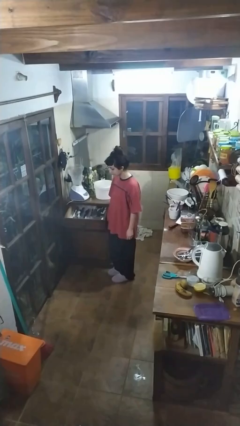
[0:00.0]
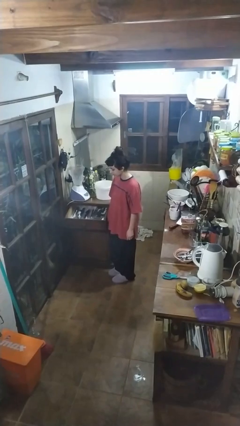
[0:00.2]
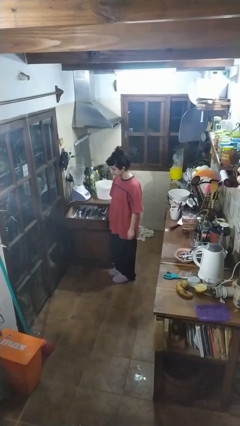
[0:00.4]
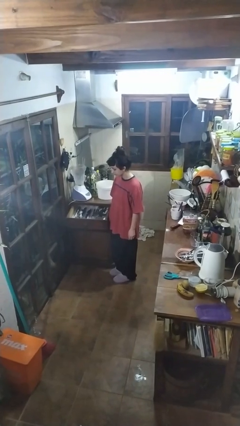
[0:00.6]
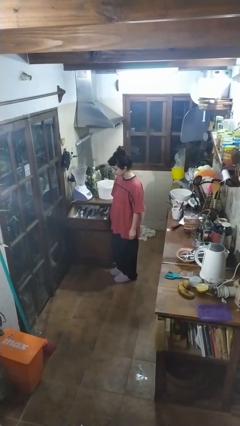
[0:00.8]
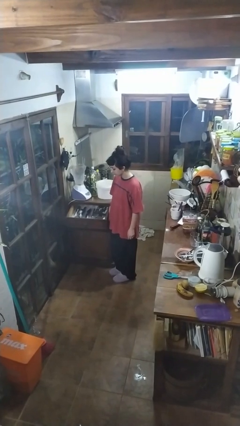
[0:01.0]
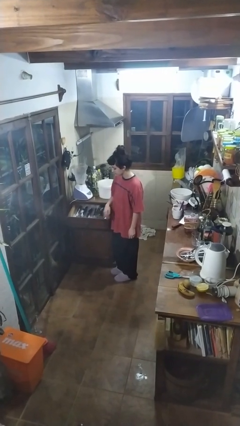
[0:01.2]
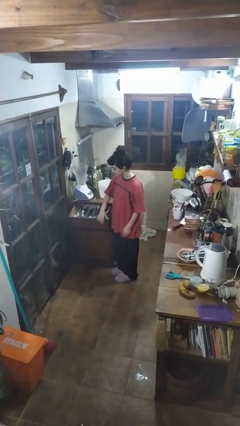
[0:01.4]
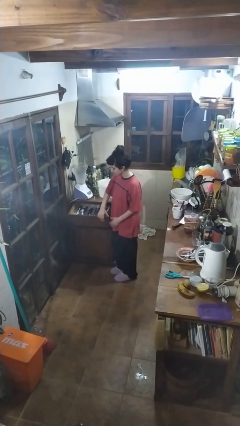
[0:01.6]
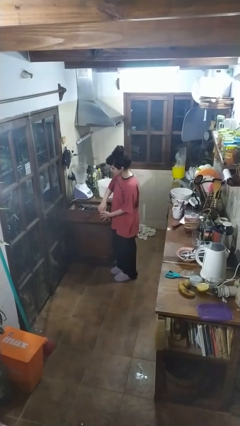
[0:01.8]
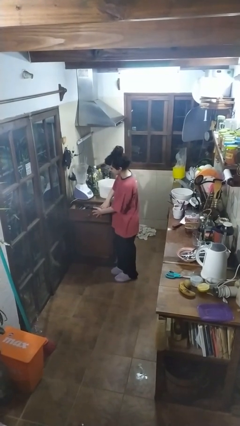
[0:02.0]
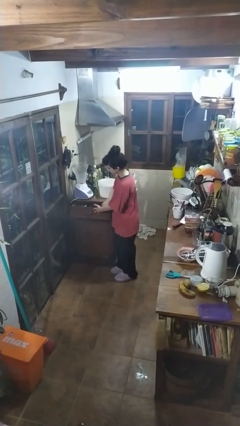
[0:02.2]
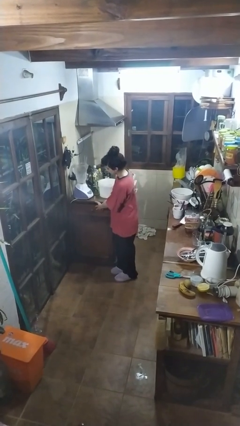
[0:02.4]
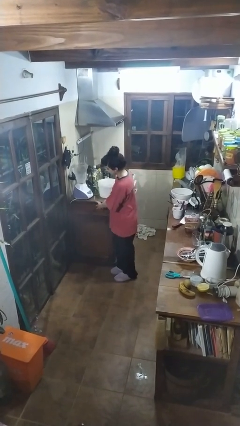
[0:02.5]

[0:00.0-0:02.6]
person closes kitchen drawer

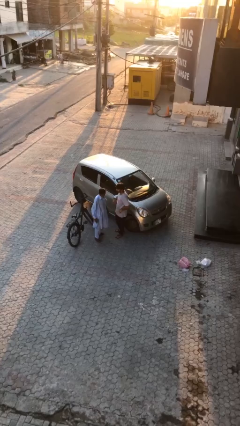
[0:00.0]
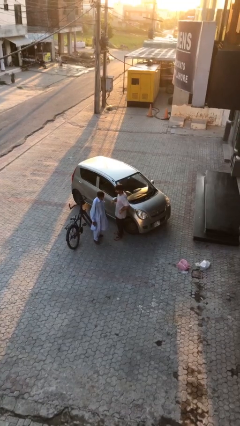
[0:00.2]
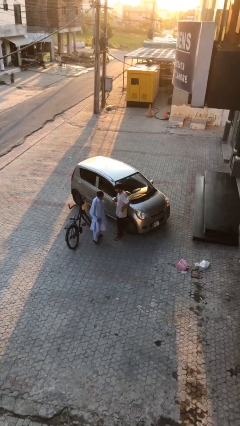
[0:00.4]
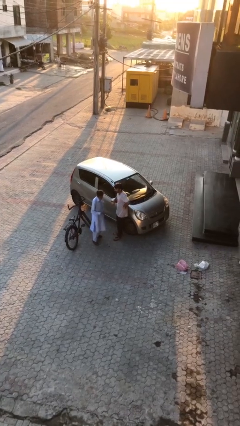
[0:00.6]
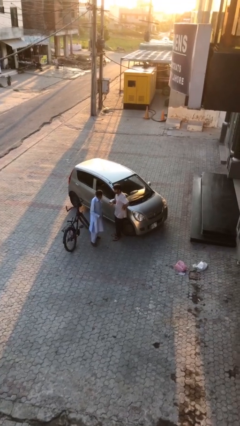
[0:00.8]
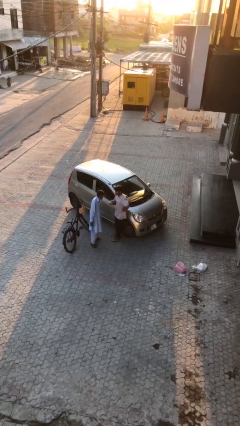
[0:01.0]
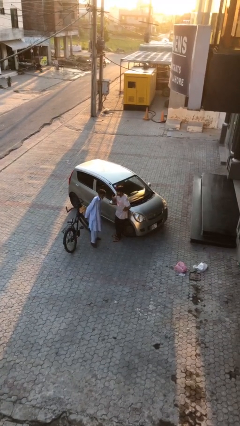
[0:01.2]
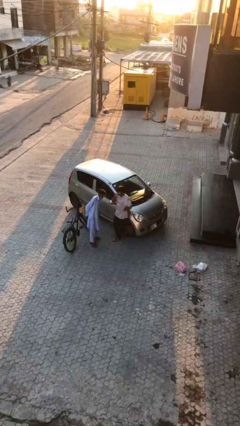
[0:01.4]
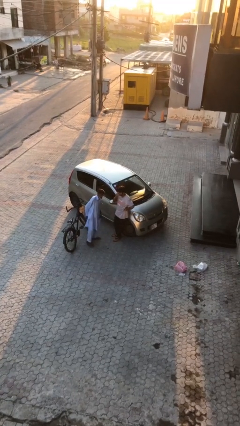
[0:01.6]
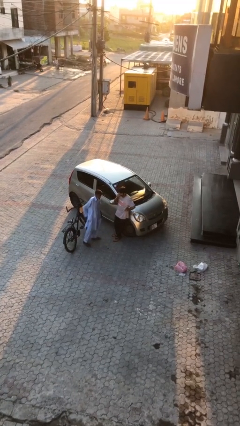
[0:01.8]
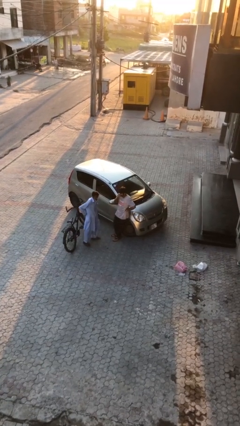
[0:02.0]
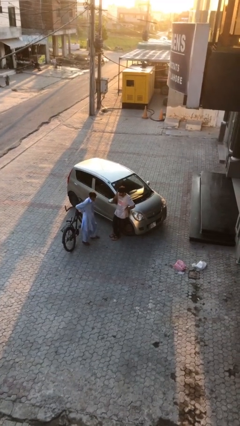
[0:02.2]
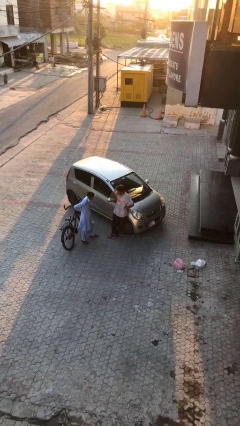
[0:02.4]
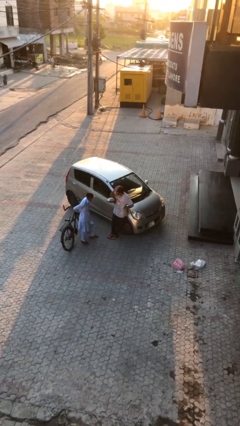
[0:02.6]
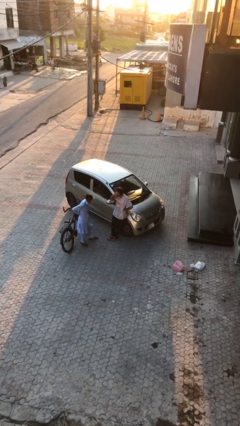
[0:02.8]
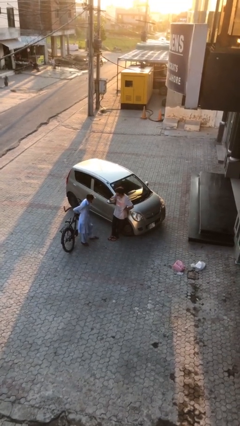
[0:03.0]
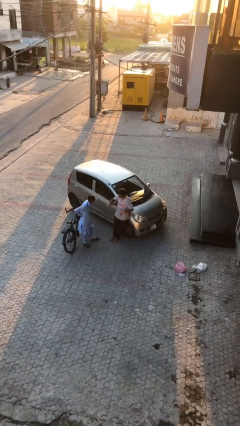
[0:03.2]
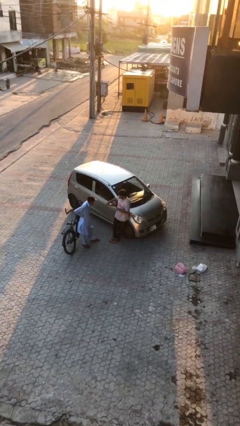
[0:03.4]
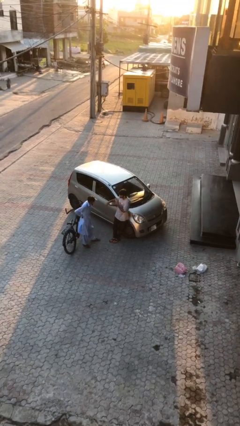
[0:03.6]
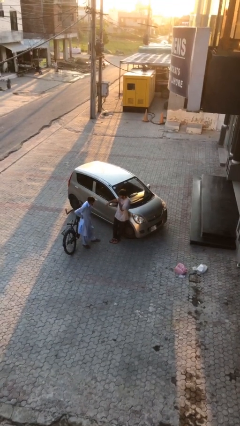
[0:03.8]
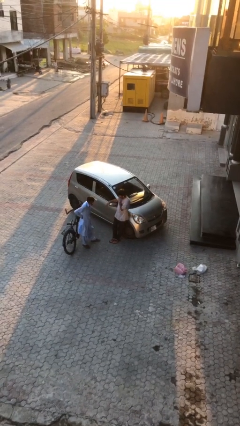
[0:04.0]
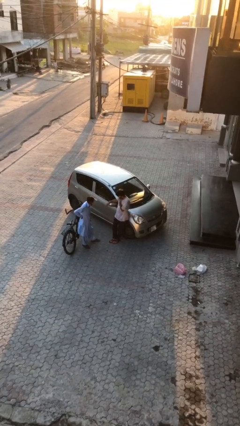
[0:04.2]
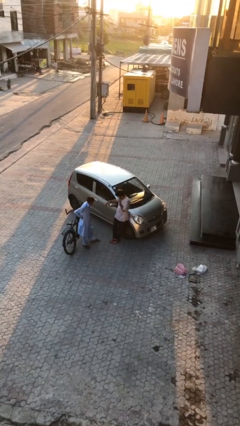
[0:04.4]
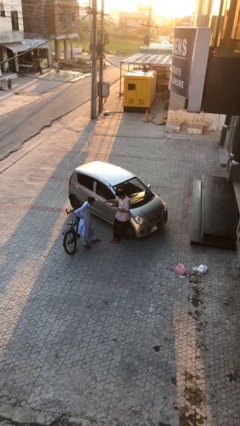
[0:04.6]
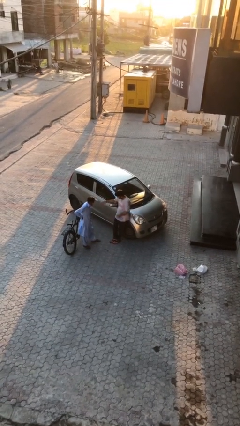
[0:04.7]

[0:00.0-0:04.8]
person talks to person

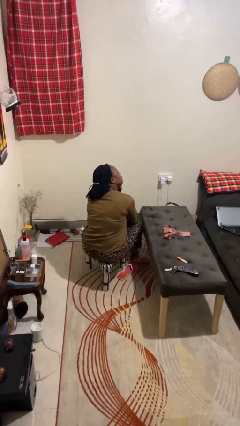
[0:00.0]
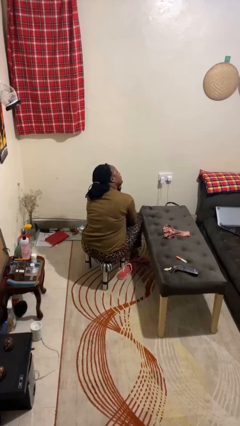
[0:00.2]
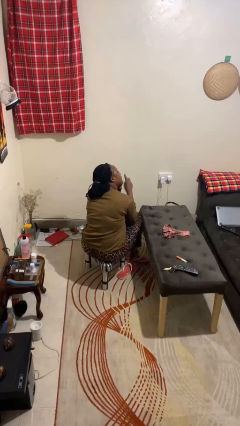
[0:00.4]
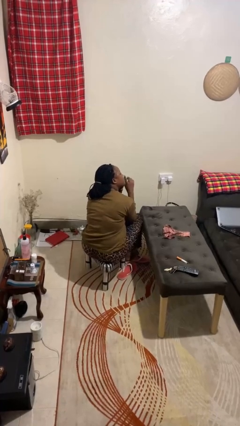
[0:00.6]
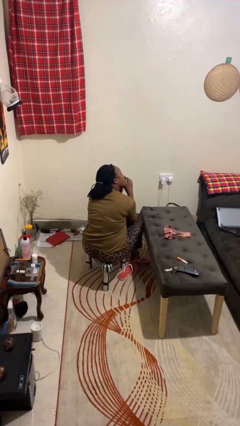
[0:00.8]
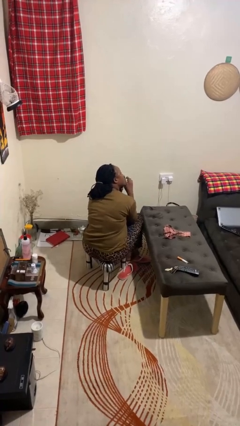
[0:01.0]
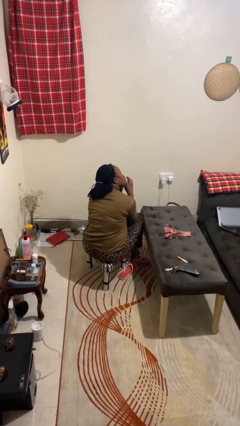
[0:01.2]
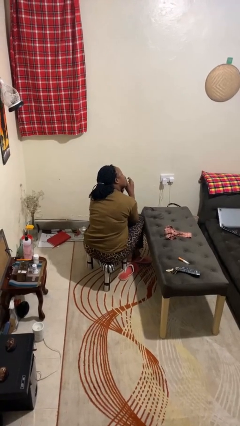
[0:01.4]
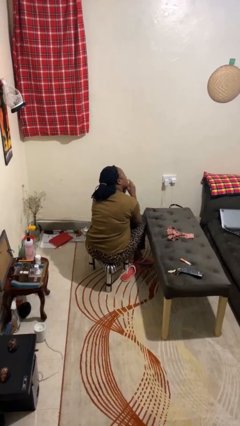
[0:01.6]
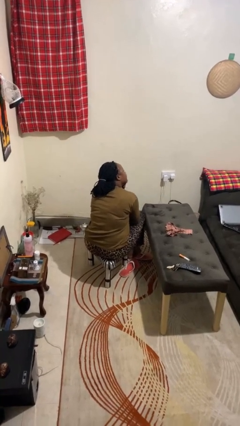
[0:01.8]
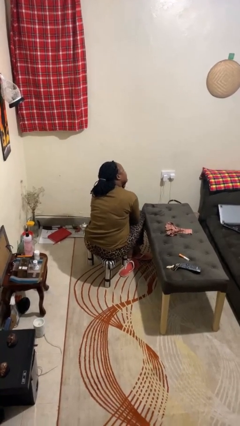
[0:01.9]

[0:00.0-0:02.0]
person gestures be quiet

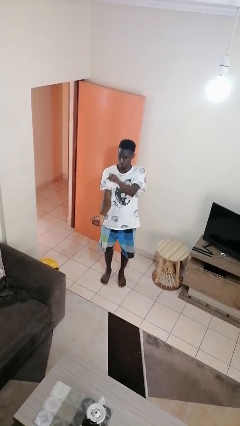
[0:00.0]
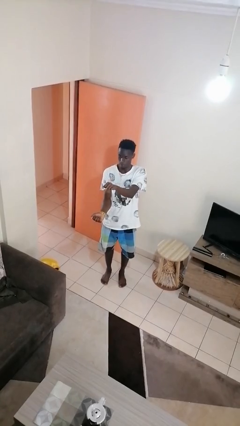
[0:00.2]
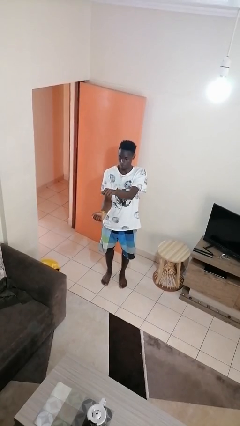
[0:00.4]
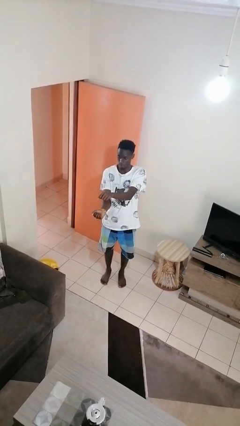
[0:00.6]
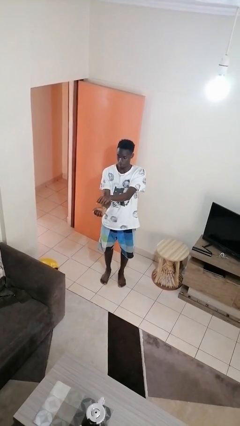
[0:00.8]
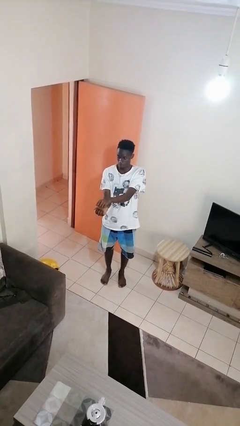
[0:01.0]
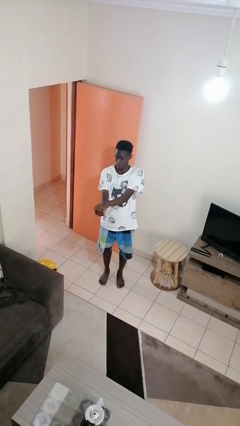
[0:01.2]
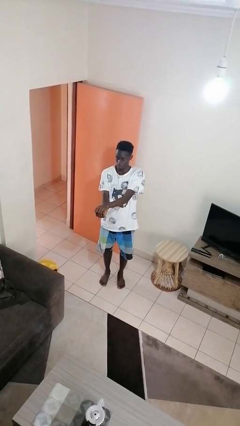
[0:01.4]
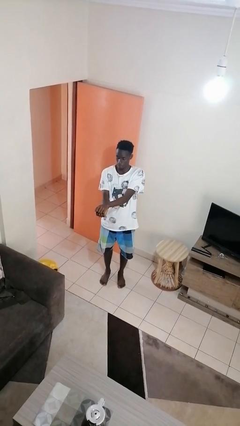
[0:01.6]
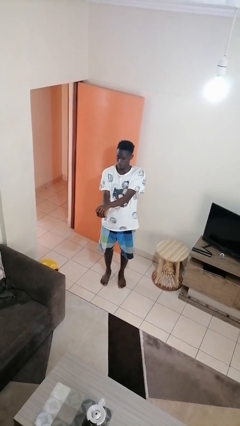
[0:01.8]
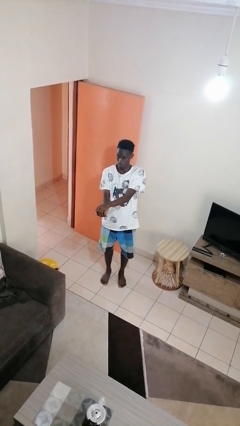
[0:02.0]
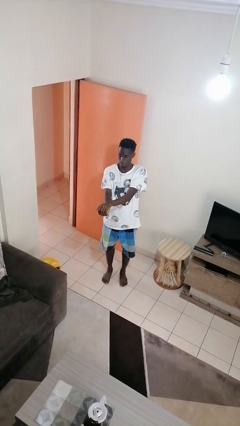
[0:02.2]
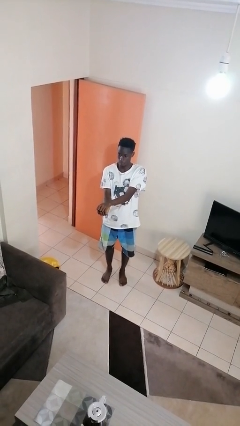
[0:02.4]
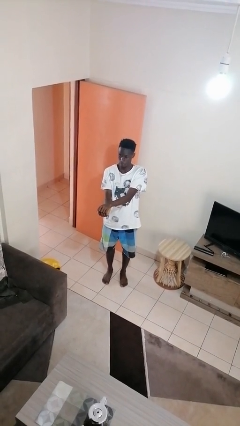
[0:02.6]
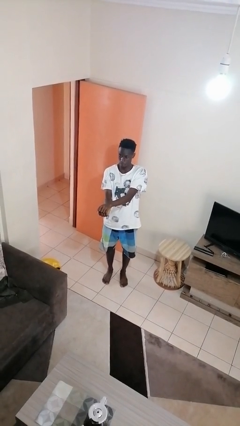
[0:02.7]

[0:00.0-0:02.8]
person gestures zoom out

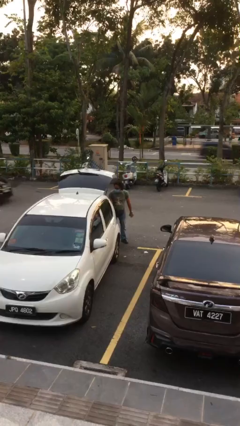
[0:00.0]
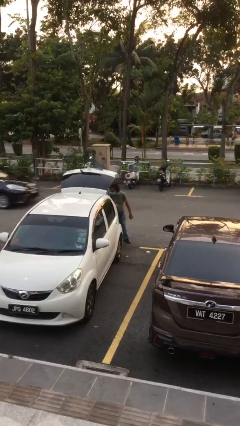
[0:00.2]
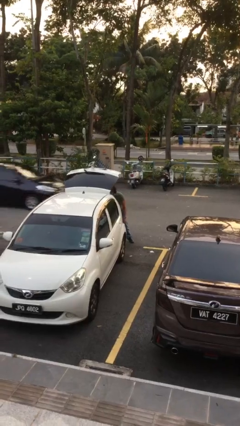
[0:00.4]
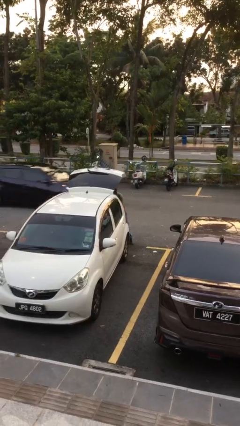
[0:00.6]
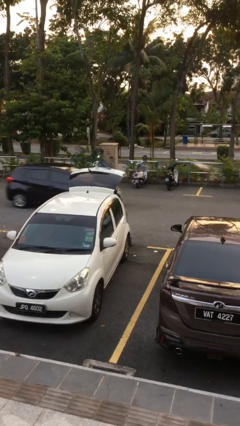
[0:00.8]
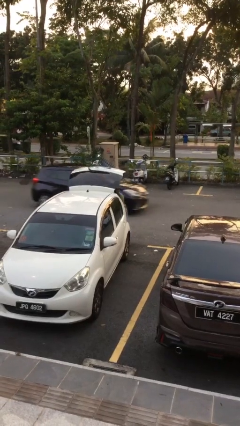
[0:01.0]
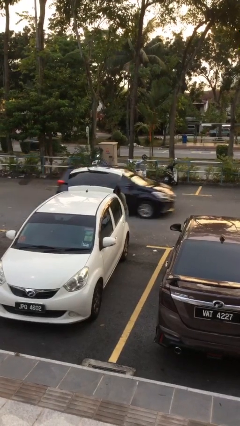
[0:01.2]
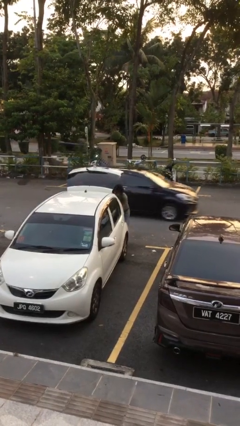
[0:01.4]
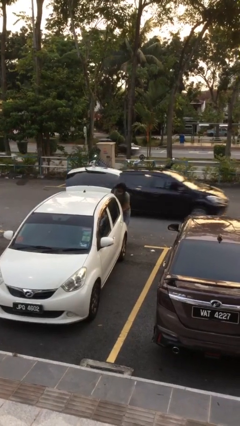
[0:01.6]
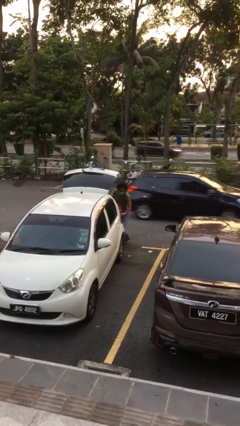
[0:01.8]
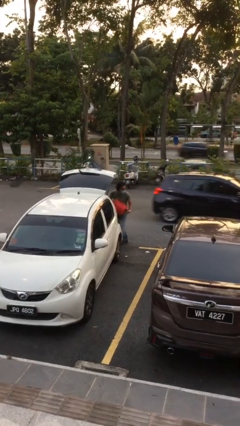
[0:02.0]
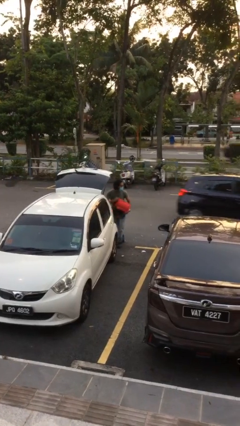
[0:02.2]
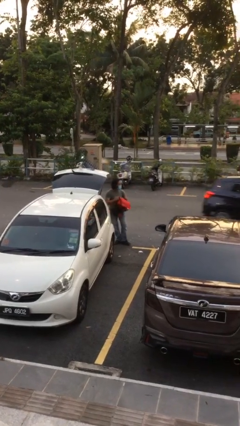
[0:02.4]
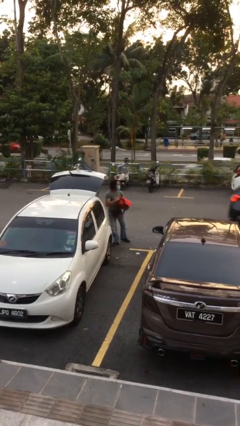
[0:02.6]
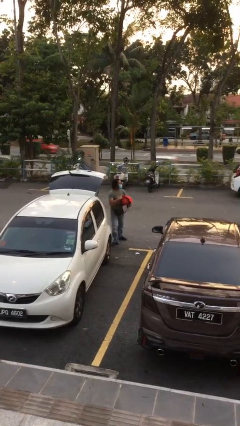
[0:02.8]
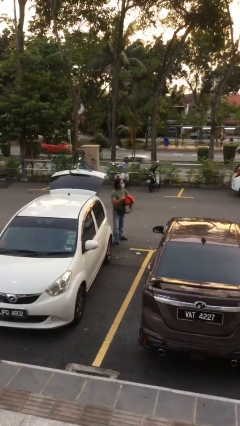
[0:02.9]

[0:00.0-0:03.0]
person unloads car

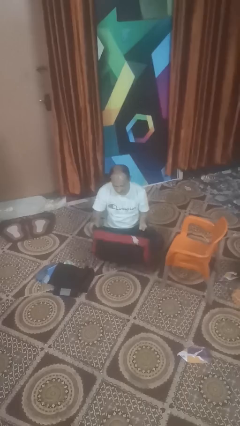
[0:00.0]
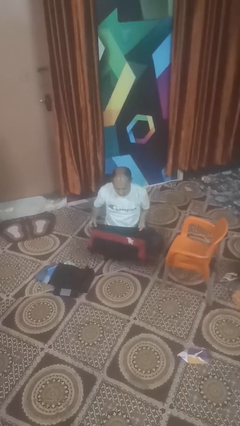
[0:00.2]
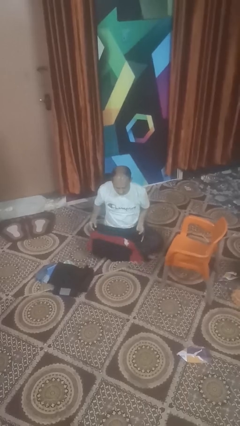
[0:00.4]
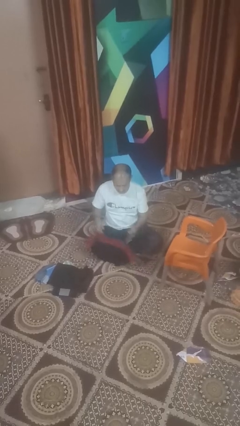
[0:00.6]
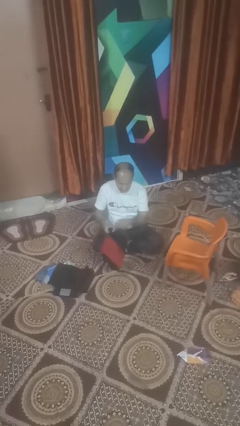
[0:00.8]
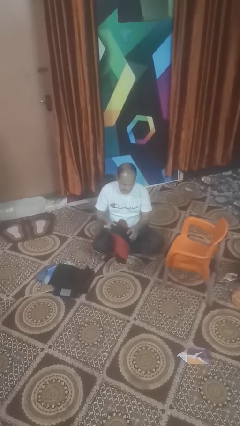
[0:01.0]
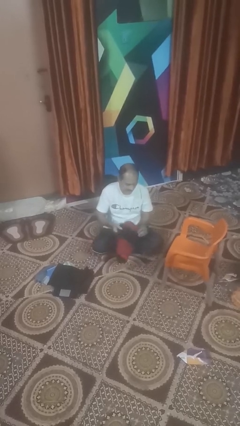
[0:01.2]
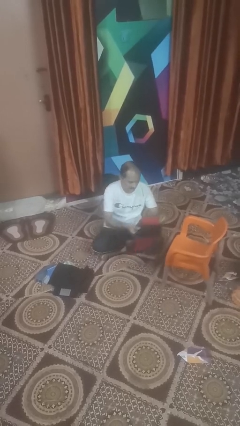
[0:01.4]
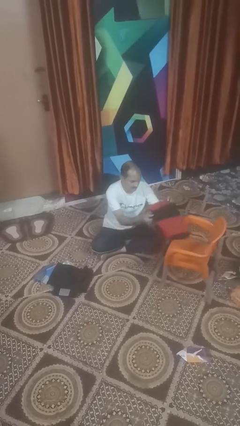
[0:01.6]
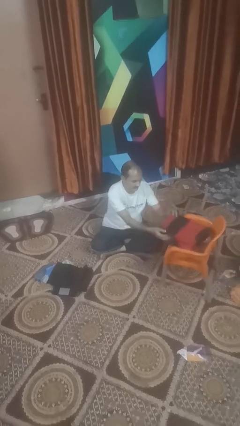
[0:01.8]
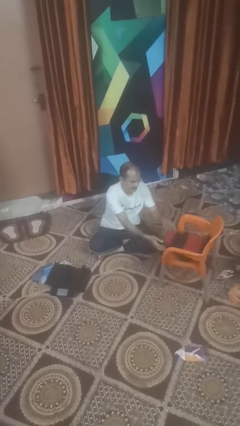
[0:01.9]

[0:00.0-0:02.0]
person folds shirt
